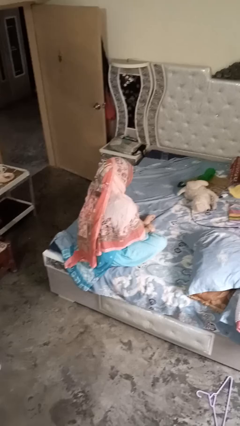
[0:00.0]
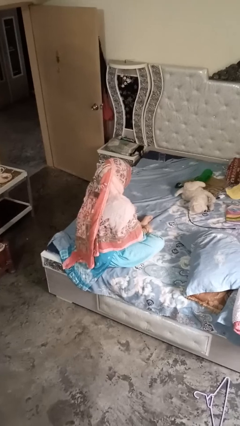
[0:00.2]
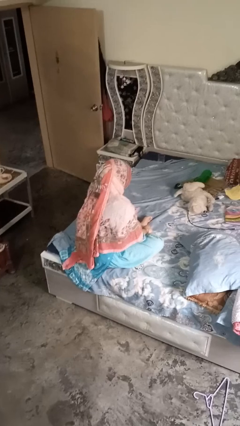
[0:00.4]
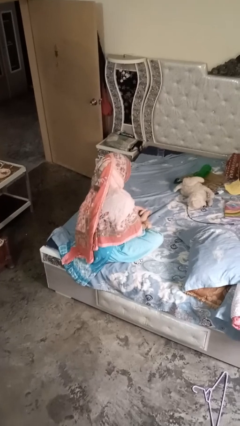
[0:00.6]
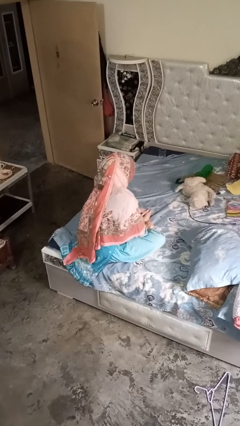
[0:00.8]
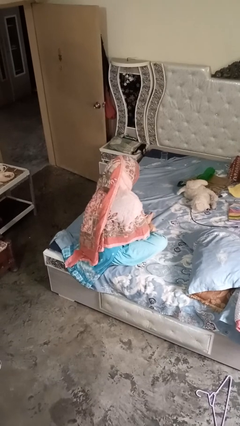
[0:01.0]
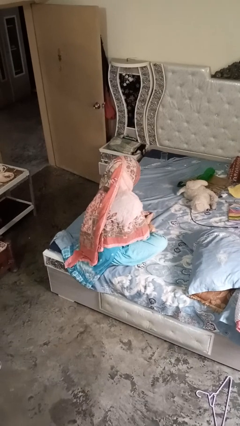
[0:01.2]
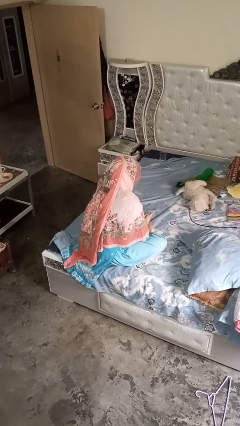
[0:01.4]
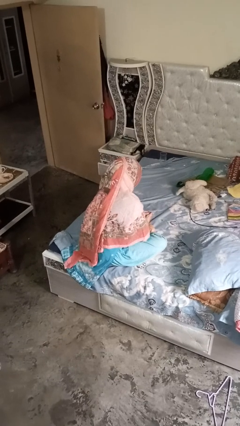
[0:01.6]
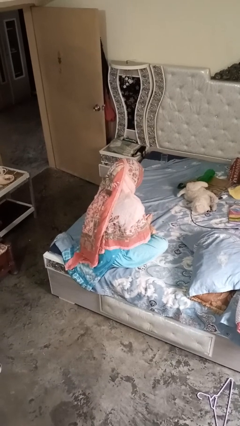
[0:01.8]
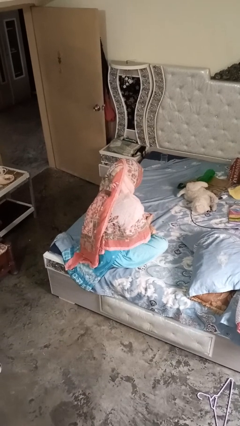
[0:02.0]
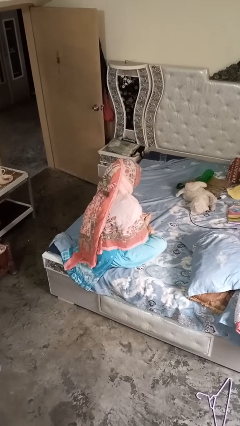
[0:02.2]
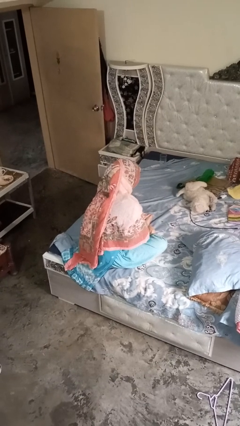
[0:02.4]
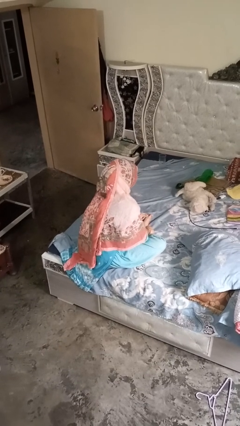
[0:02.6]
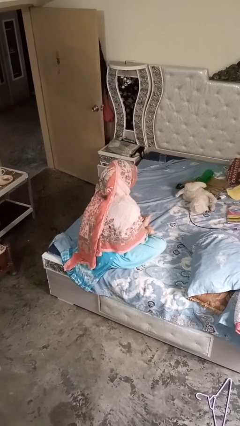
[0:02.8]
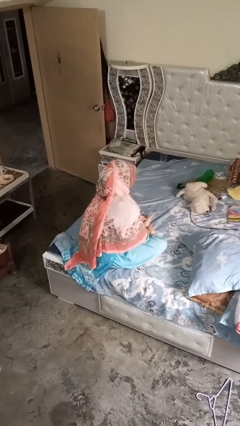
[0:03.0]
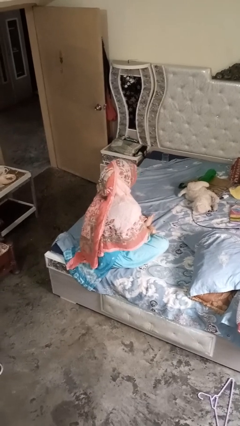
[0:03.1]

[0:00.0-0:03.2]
person rubs foot

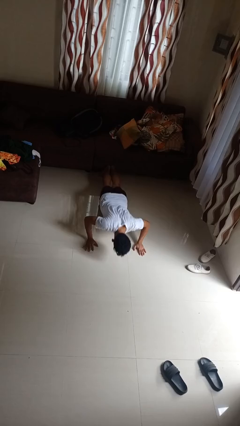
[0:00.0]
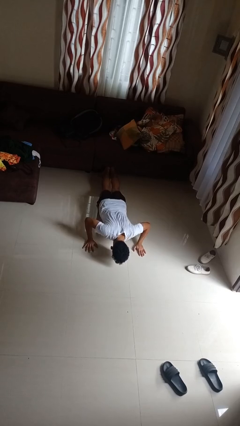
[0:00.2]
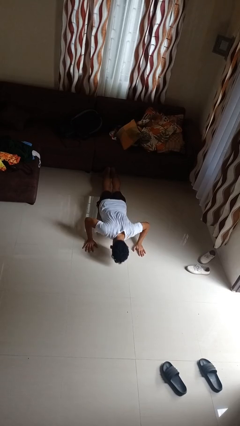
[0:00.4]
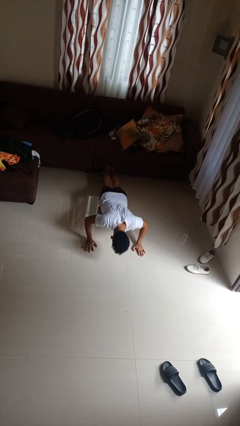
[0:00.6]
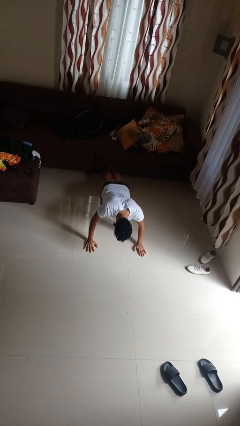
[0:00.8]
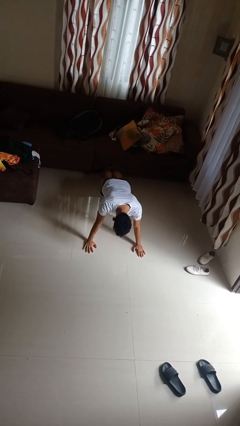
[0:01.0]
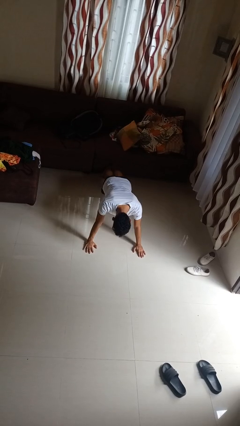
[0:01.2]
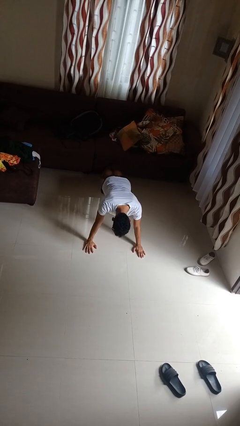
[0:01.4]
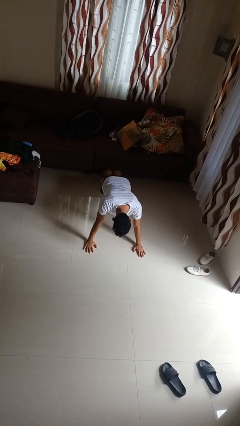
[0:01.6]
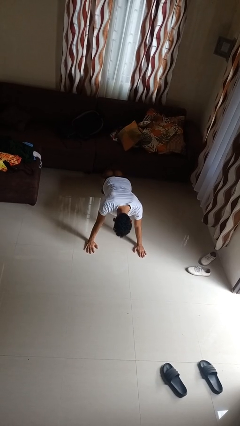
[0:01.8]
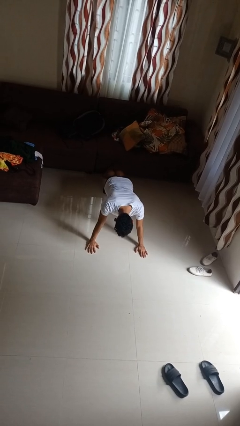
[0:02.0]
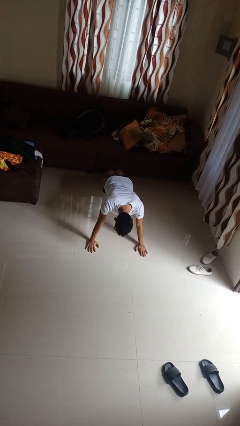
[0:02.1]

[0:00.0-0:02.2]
person exercises with pushup

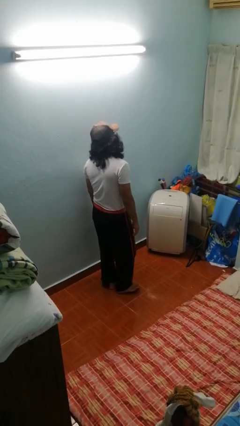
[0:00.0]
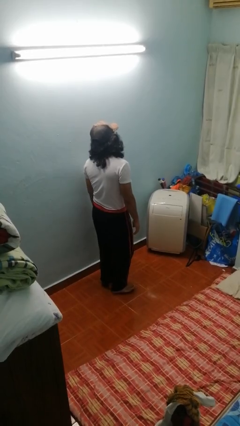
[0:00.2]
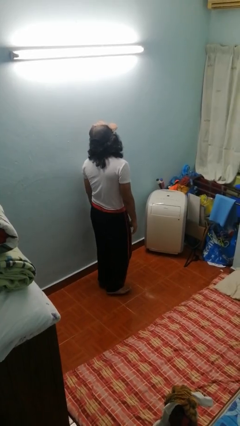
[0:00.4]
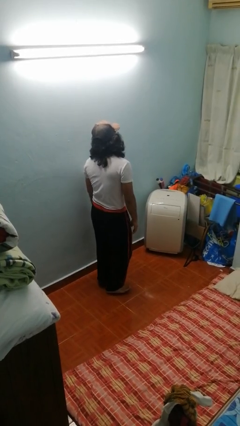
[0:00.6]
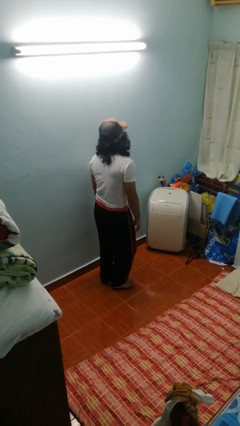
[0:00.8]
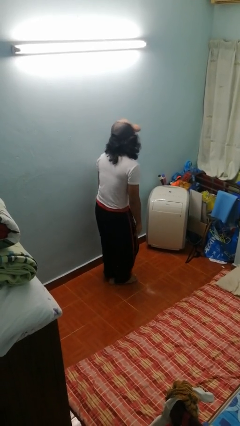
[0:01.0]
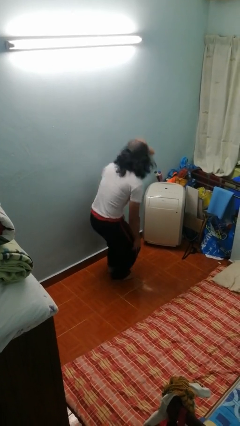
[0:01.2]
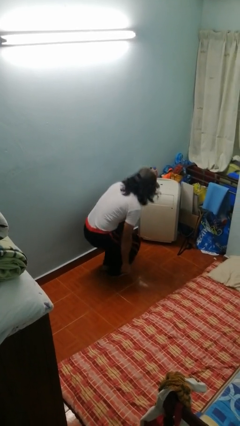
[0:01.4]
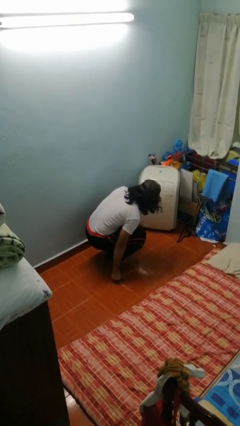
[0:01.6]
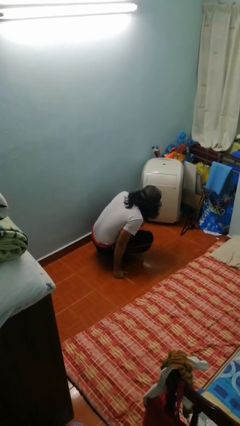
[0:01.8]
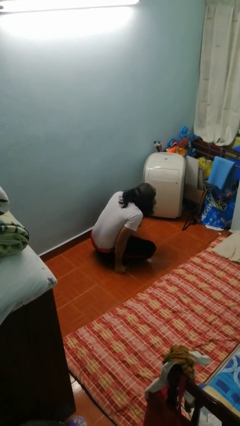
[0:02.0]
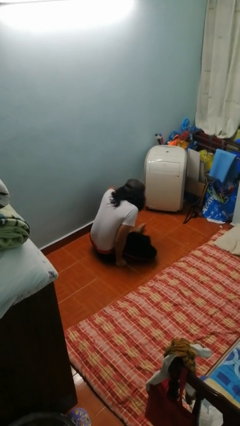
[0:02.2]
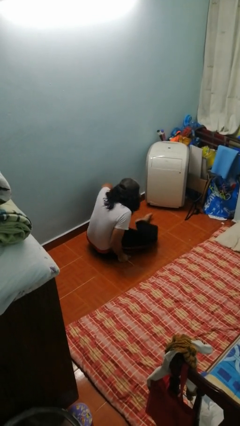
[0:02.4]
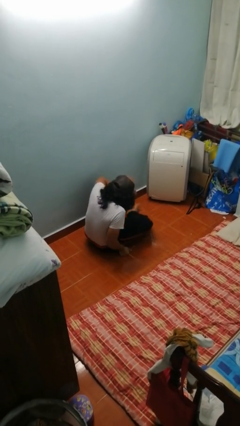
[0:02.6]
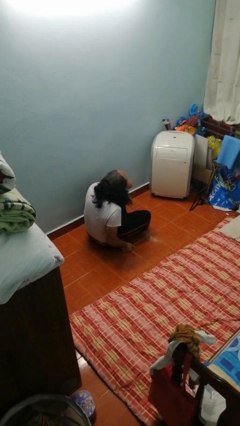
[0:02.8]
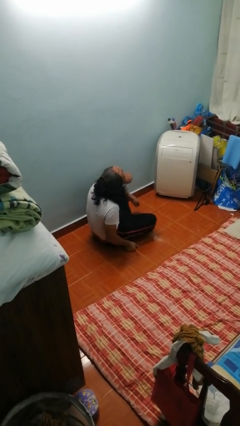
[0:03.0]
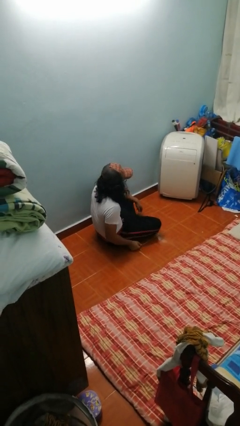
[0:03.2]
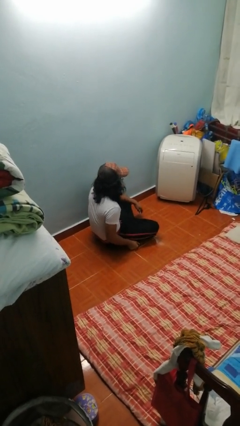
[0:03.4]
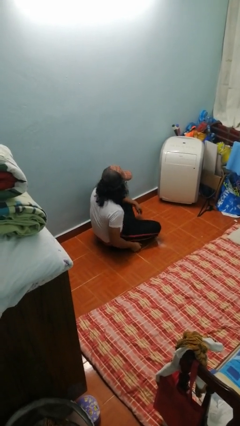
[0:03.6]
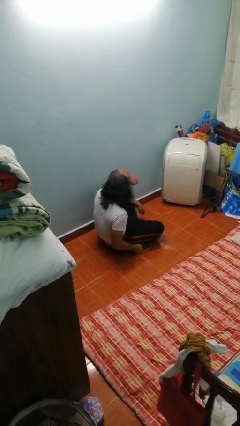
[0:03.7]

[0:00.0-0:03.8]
person sits crisscross

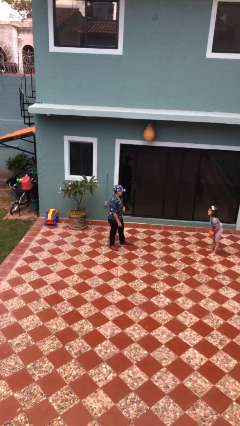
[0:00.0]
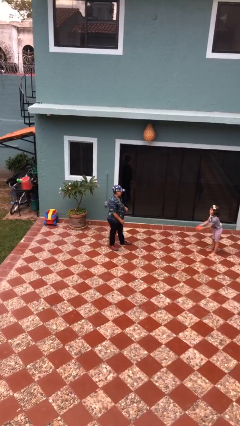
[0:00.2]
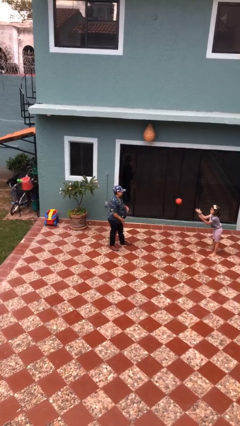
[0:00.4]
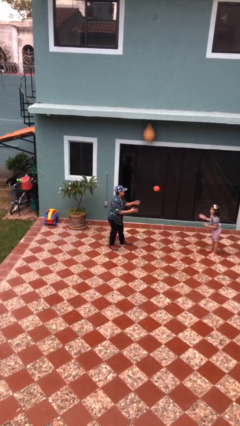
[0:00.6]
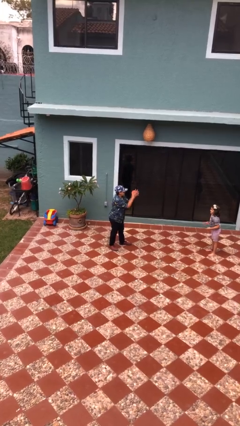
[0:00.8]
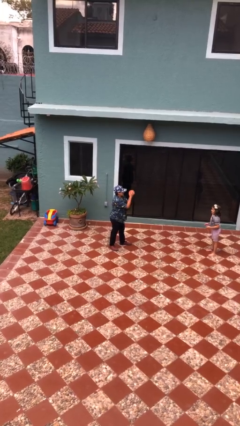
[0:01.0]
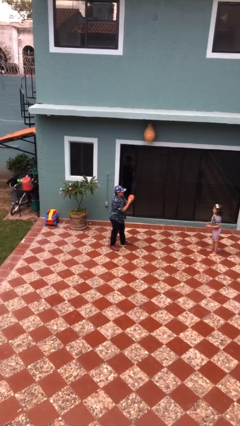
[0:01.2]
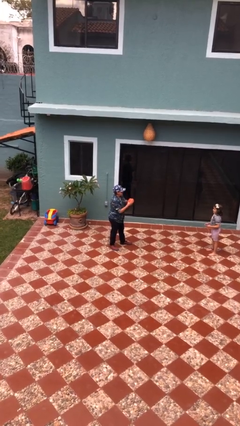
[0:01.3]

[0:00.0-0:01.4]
person catches object from person

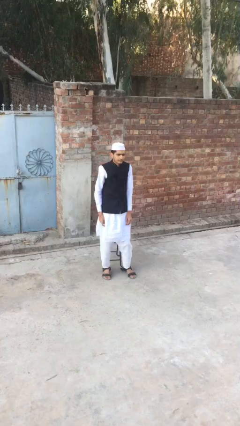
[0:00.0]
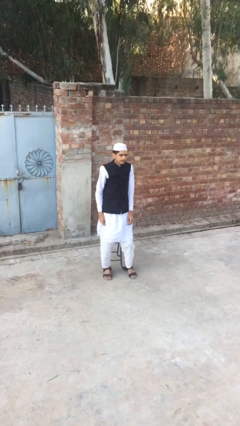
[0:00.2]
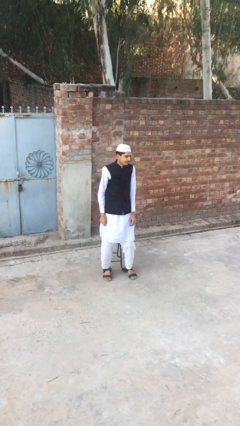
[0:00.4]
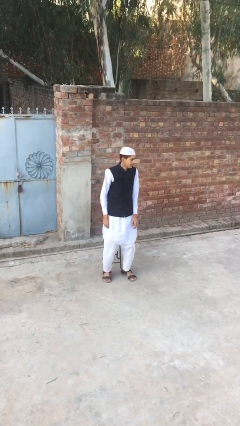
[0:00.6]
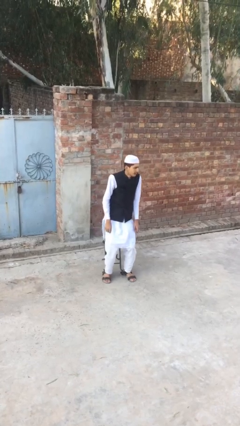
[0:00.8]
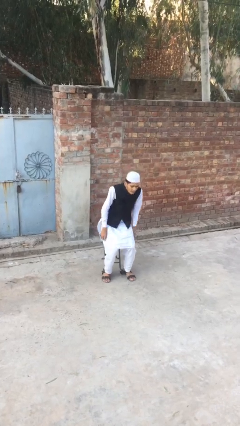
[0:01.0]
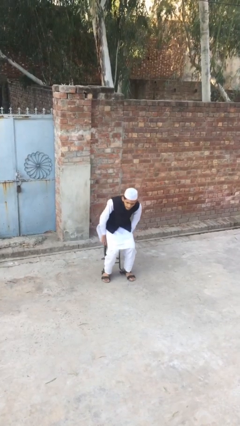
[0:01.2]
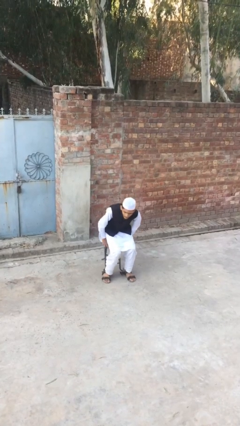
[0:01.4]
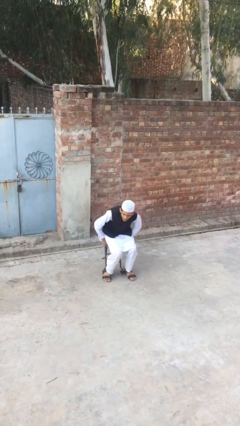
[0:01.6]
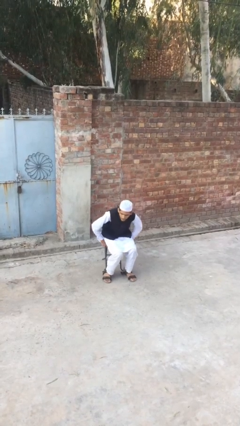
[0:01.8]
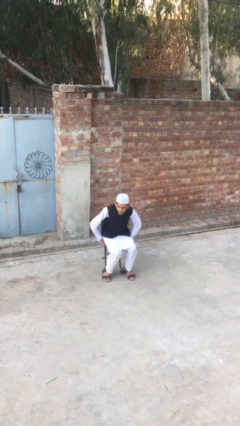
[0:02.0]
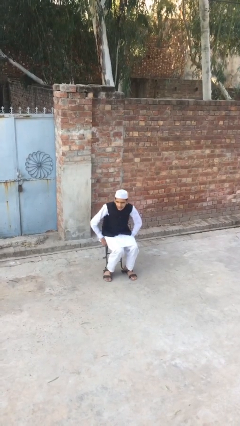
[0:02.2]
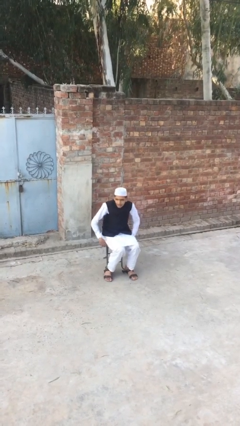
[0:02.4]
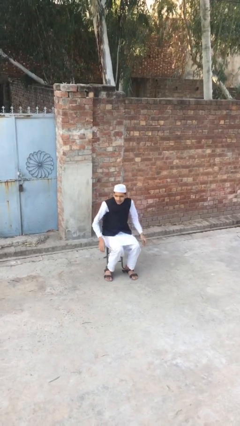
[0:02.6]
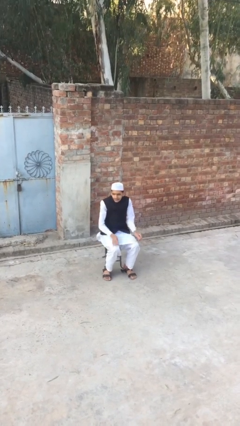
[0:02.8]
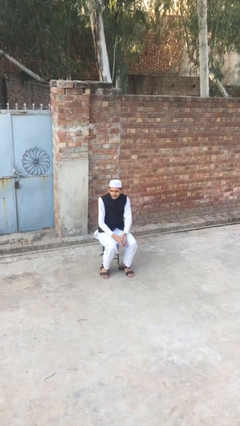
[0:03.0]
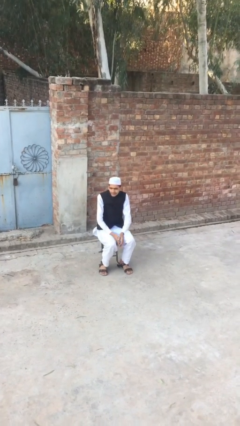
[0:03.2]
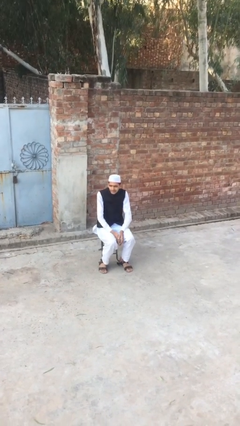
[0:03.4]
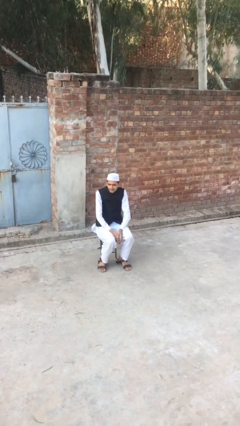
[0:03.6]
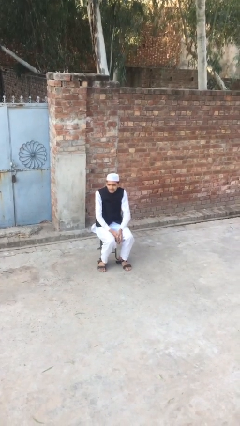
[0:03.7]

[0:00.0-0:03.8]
person sits down

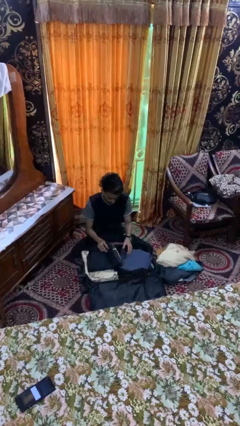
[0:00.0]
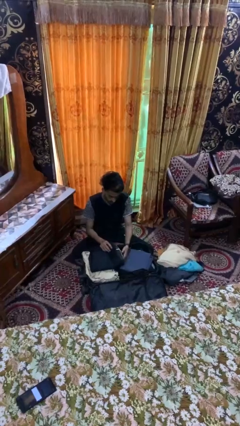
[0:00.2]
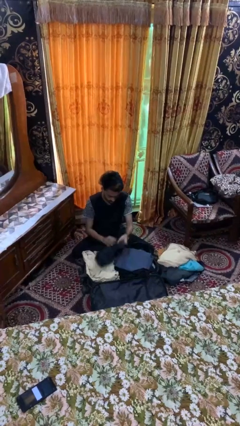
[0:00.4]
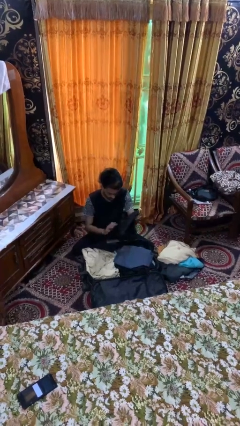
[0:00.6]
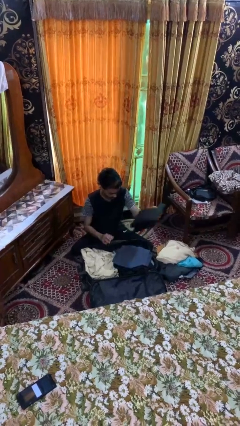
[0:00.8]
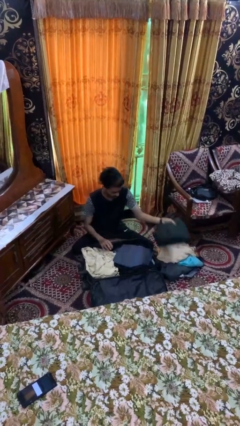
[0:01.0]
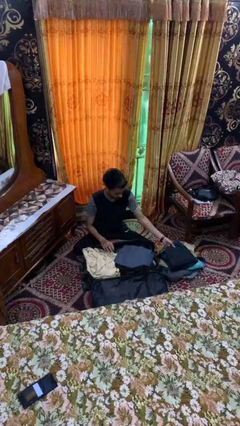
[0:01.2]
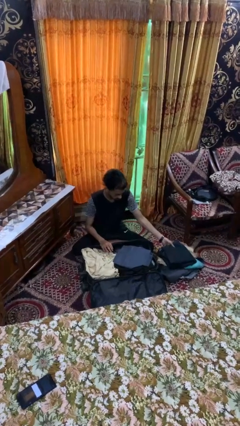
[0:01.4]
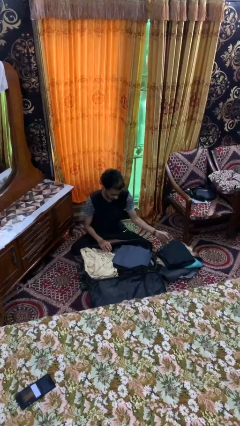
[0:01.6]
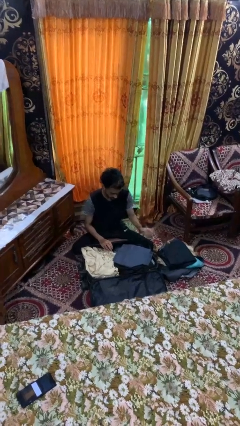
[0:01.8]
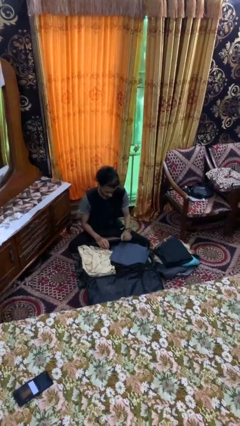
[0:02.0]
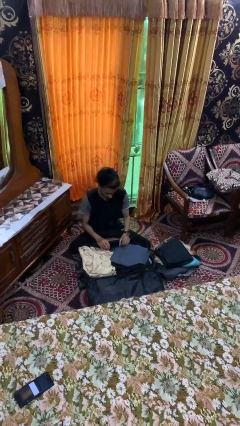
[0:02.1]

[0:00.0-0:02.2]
person unloads clothes from suitcase

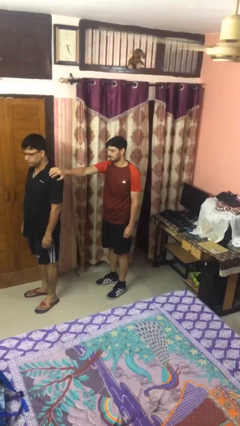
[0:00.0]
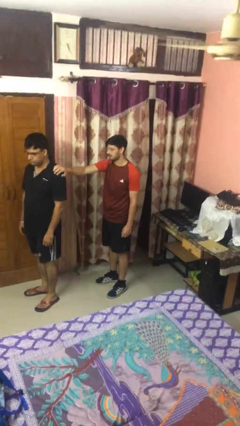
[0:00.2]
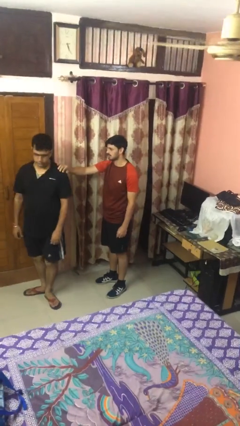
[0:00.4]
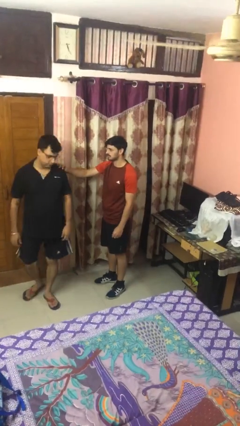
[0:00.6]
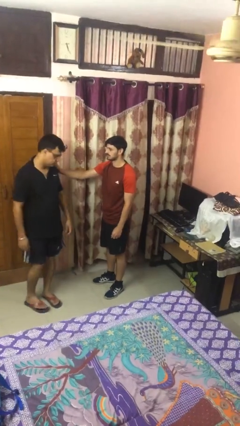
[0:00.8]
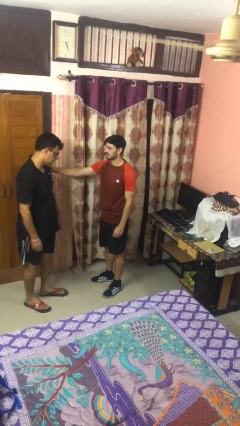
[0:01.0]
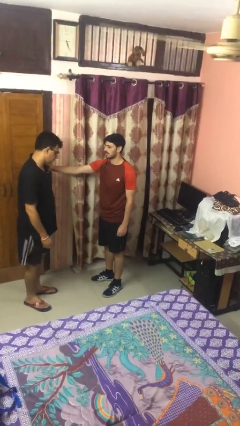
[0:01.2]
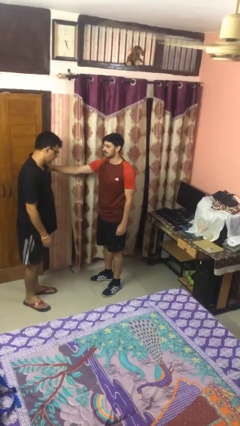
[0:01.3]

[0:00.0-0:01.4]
person spins person around
